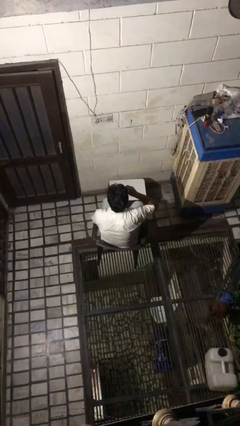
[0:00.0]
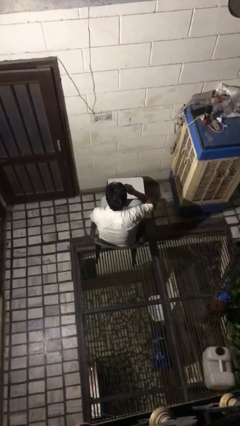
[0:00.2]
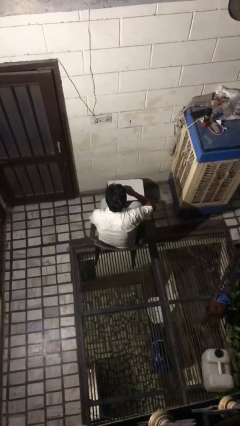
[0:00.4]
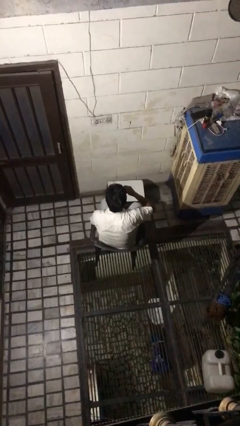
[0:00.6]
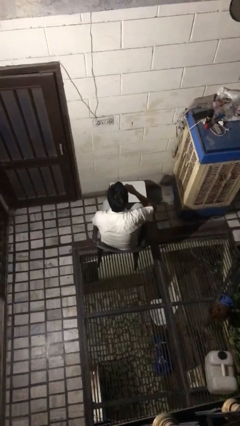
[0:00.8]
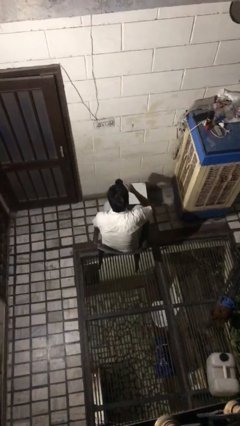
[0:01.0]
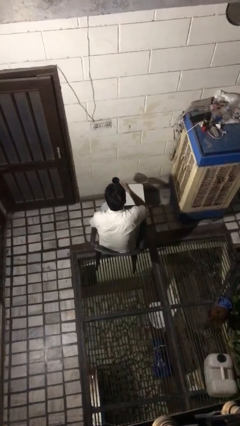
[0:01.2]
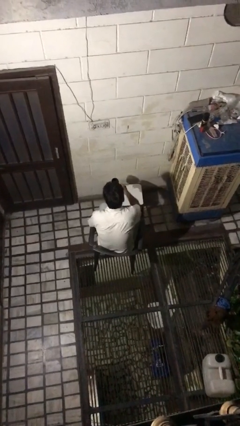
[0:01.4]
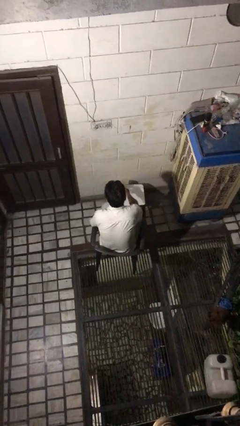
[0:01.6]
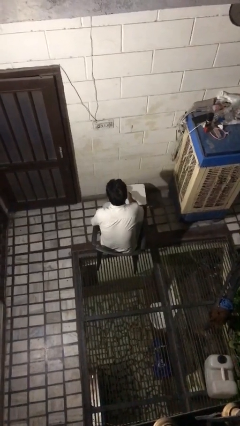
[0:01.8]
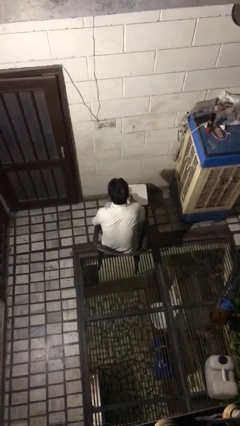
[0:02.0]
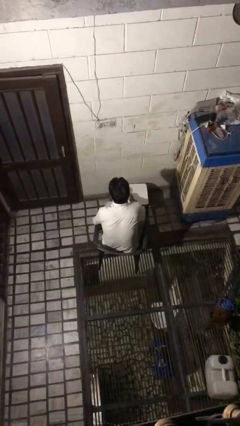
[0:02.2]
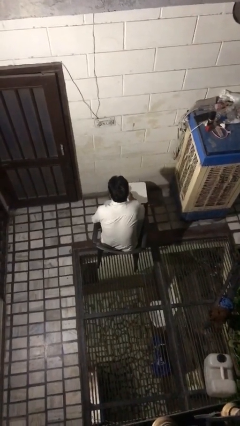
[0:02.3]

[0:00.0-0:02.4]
person puts down object on table

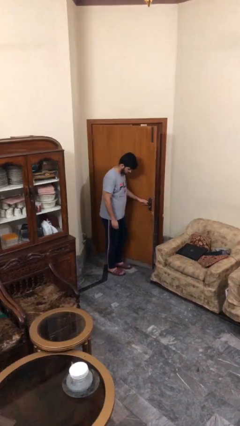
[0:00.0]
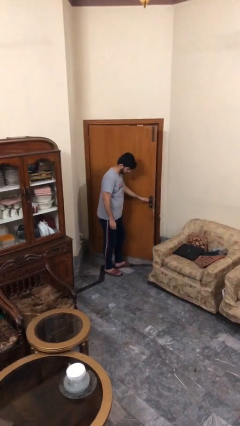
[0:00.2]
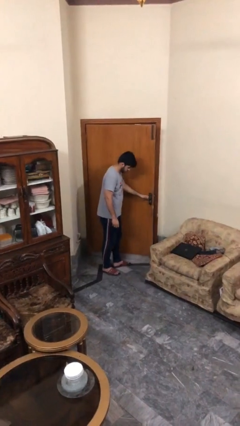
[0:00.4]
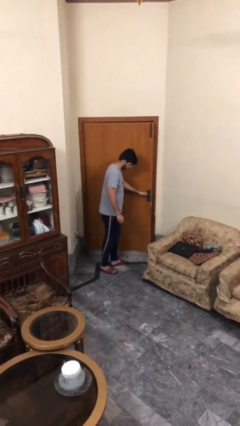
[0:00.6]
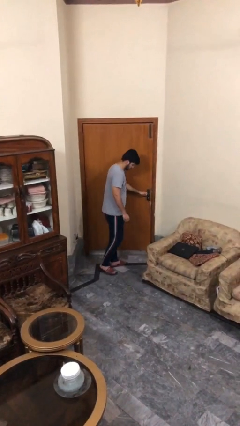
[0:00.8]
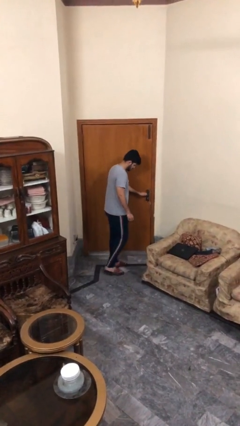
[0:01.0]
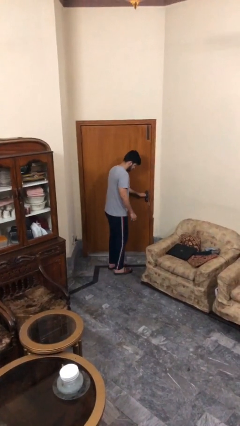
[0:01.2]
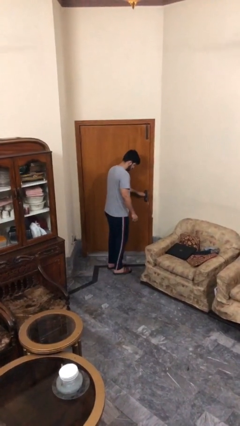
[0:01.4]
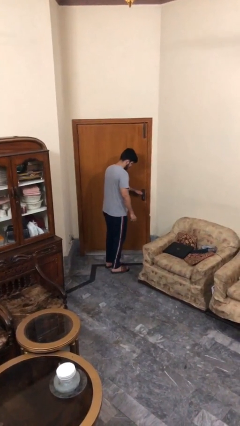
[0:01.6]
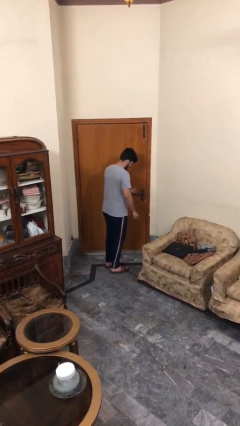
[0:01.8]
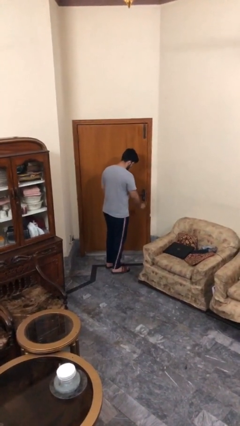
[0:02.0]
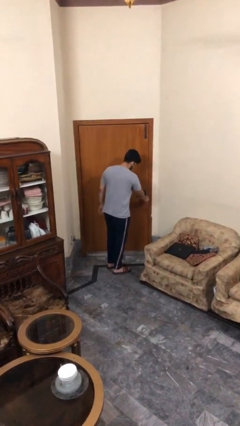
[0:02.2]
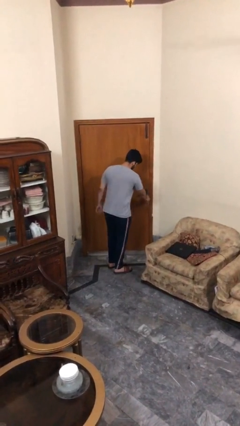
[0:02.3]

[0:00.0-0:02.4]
person closes facility door

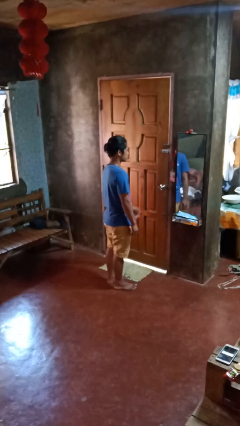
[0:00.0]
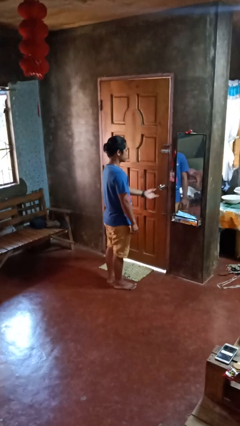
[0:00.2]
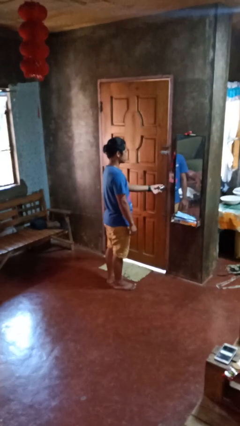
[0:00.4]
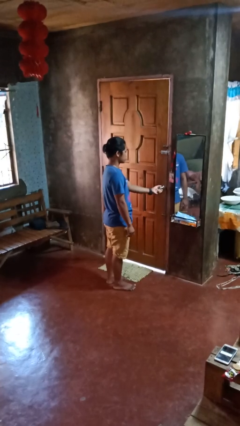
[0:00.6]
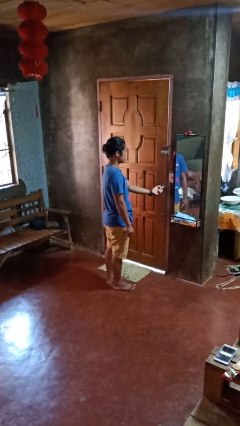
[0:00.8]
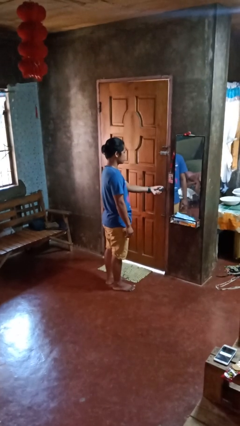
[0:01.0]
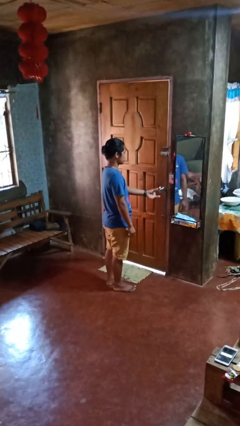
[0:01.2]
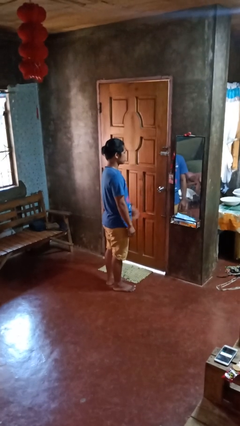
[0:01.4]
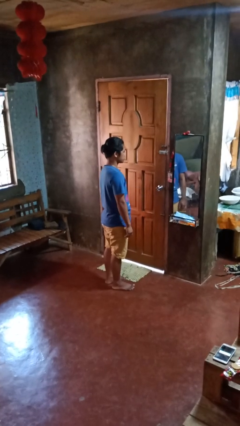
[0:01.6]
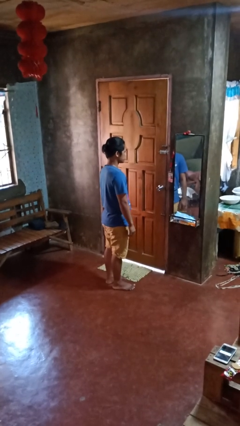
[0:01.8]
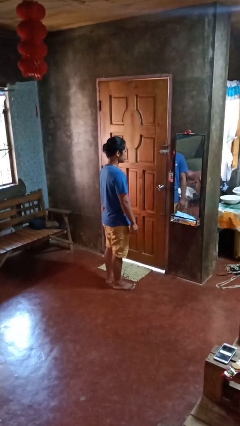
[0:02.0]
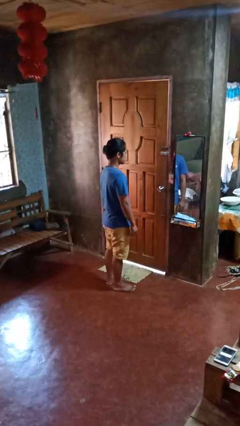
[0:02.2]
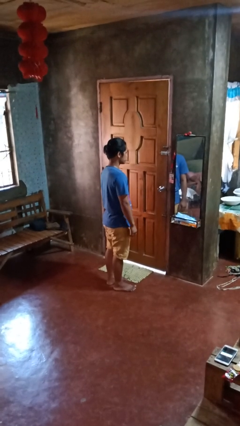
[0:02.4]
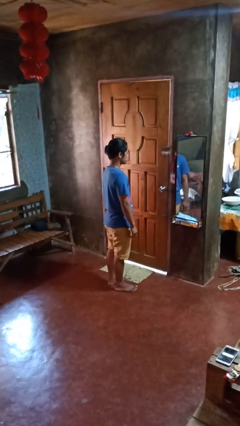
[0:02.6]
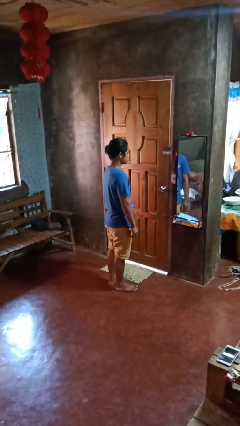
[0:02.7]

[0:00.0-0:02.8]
person unlocks door with keys

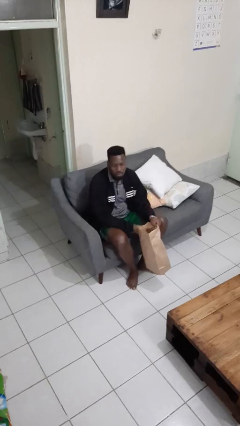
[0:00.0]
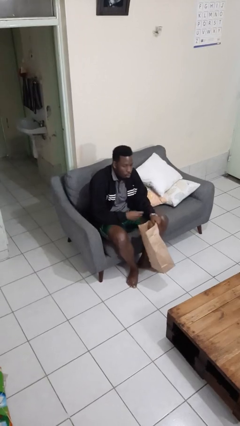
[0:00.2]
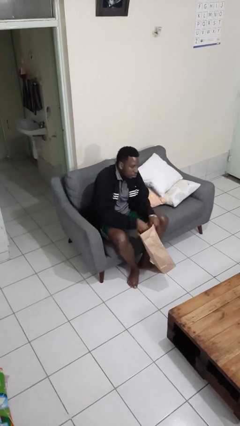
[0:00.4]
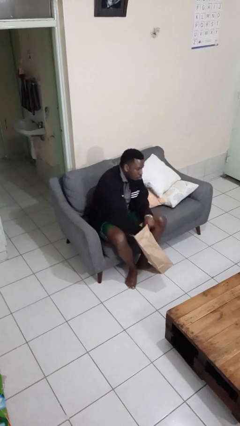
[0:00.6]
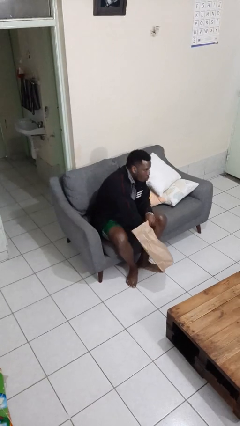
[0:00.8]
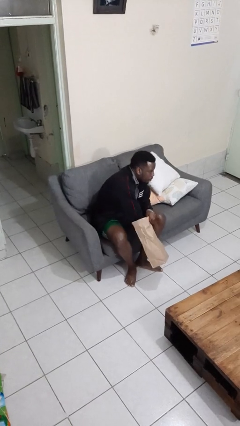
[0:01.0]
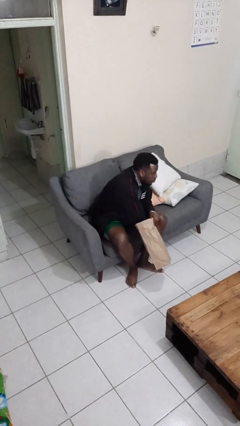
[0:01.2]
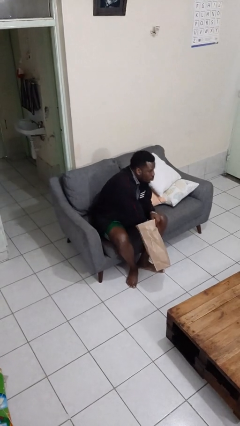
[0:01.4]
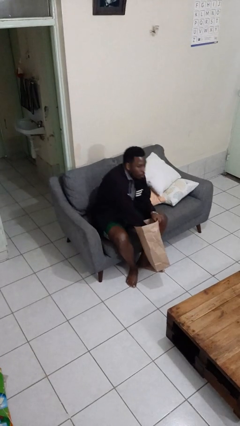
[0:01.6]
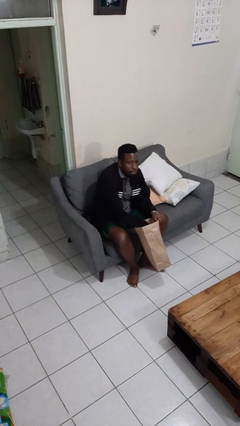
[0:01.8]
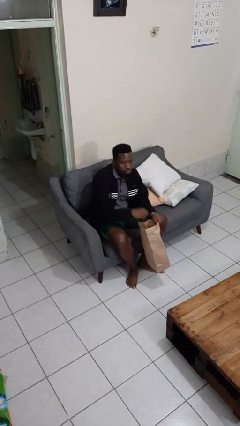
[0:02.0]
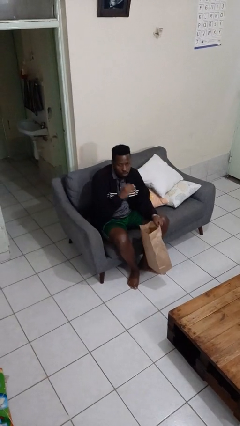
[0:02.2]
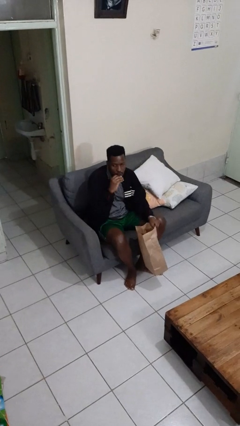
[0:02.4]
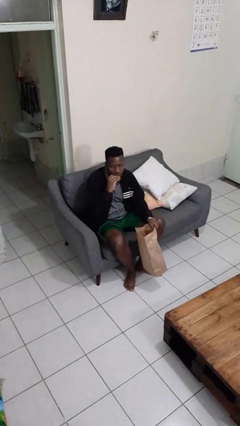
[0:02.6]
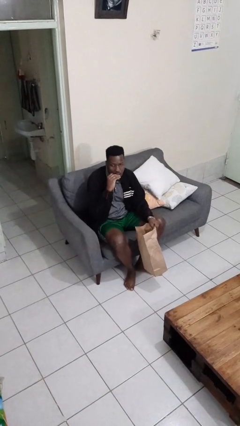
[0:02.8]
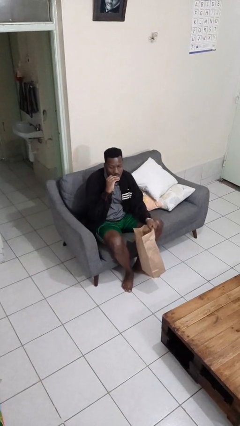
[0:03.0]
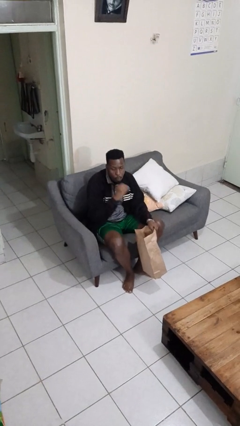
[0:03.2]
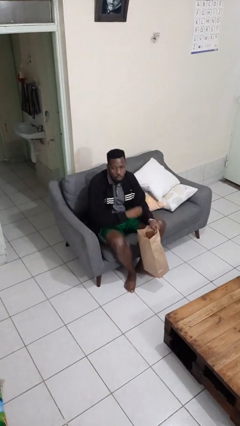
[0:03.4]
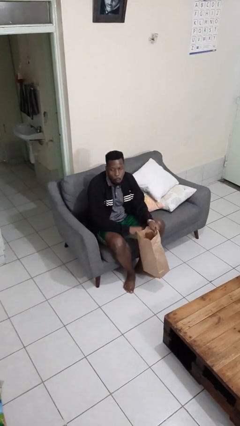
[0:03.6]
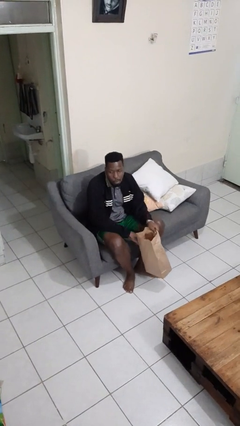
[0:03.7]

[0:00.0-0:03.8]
person eats snack from bag

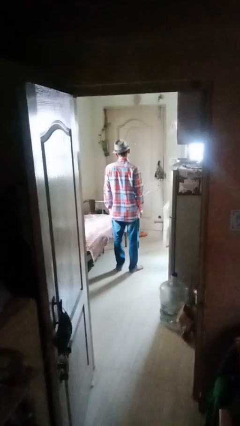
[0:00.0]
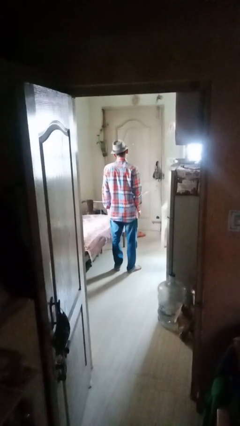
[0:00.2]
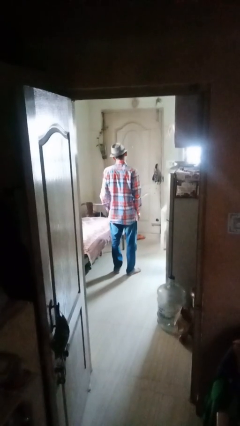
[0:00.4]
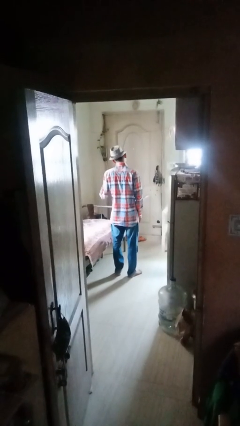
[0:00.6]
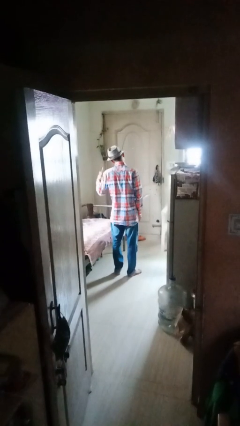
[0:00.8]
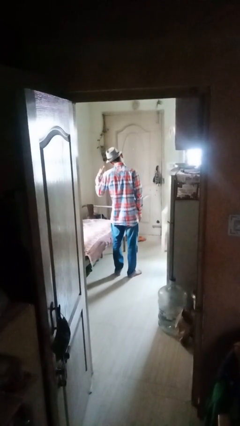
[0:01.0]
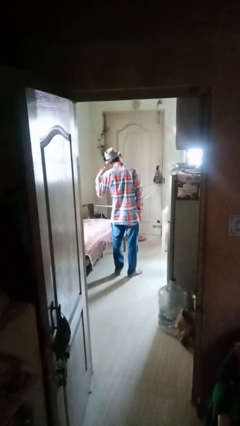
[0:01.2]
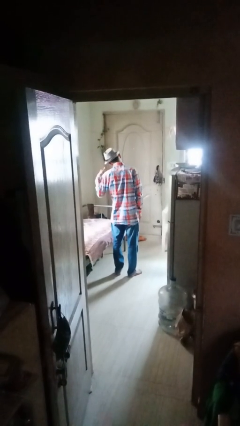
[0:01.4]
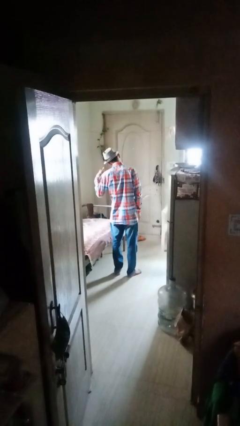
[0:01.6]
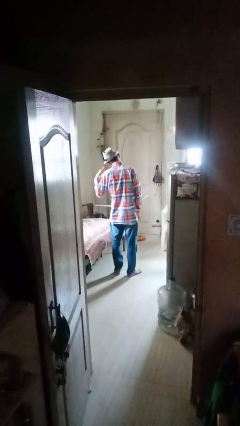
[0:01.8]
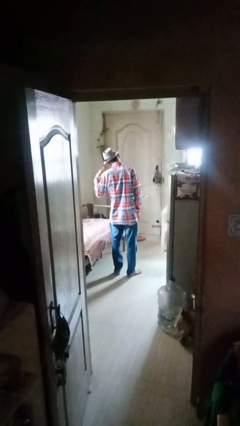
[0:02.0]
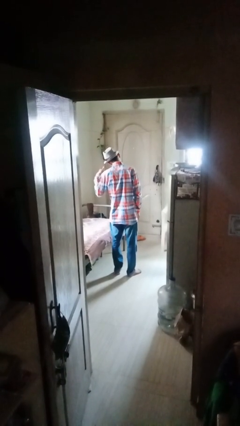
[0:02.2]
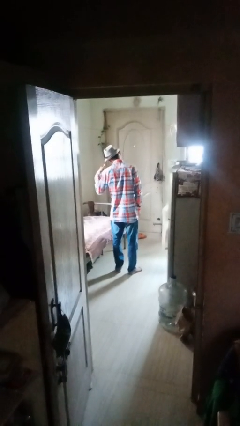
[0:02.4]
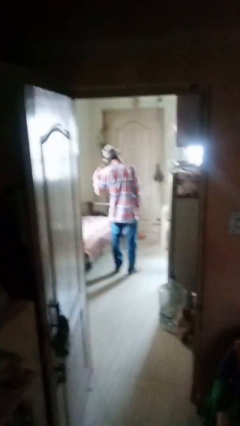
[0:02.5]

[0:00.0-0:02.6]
person gestures call me

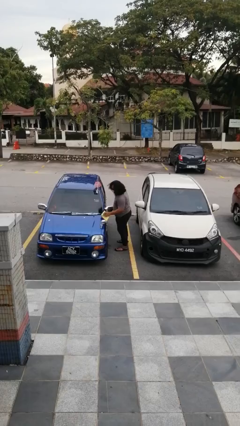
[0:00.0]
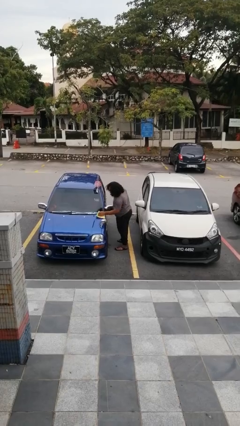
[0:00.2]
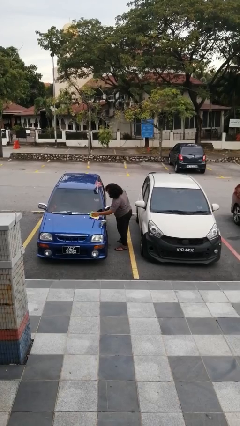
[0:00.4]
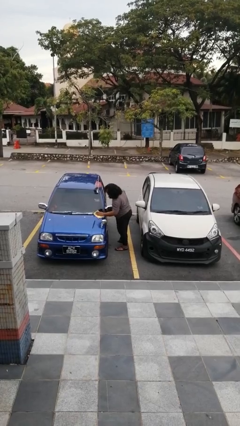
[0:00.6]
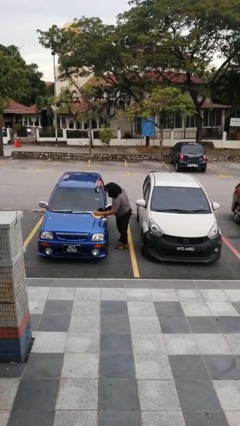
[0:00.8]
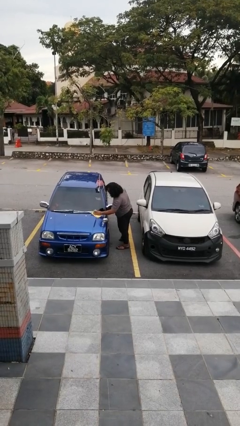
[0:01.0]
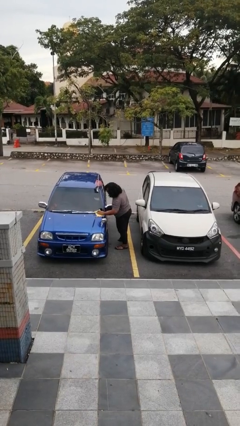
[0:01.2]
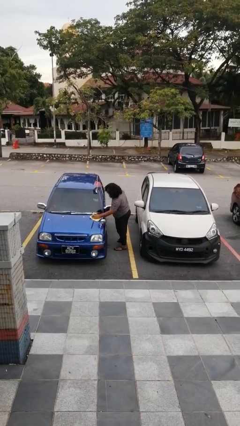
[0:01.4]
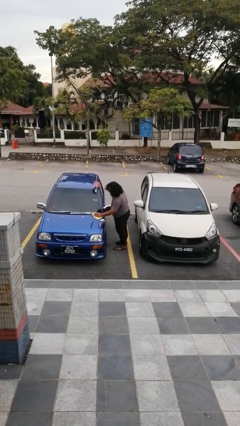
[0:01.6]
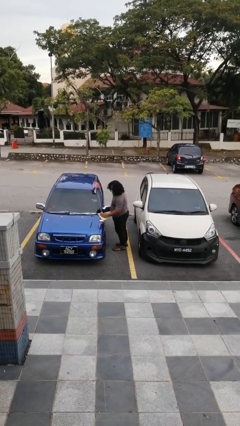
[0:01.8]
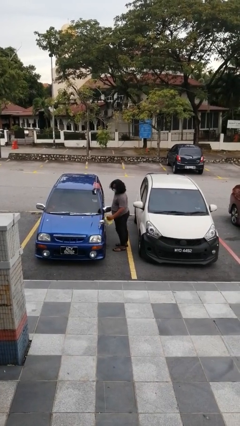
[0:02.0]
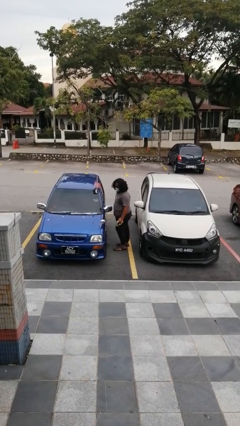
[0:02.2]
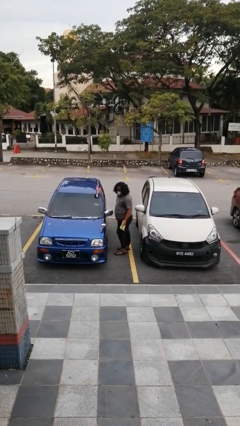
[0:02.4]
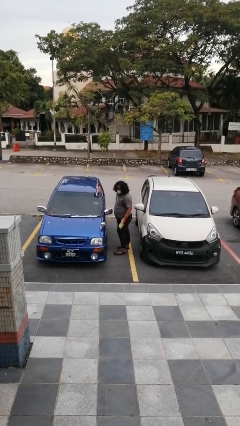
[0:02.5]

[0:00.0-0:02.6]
person polishes car with rag

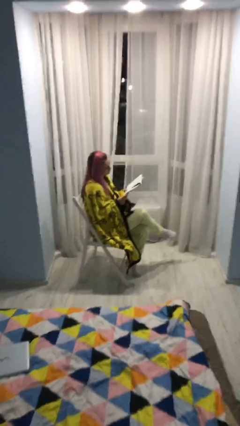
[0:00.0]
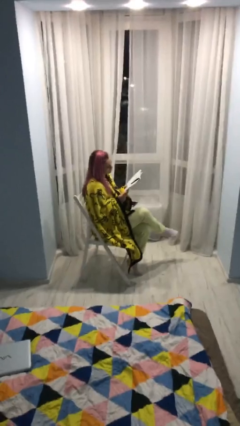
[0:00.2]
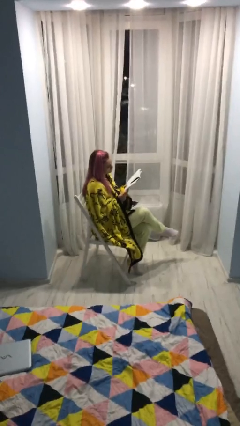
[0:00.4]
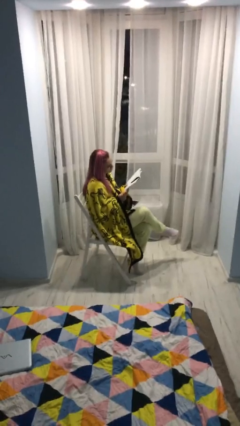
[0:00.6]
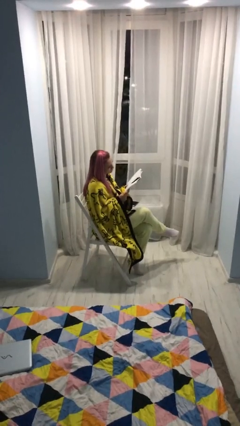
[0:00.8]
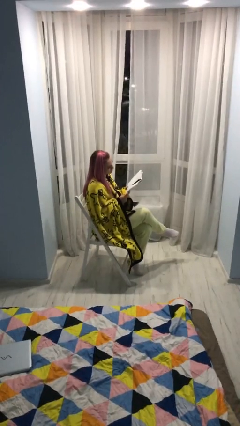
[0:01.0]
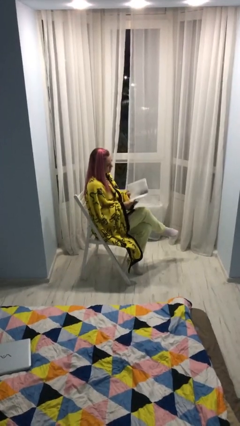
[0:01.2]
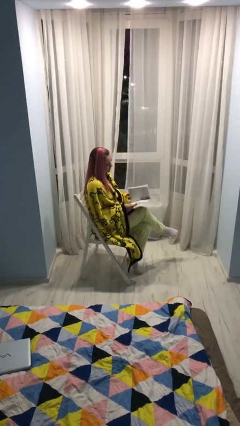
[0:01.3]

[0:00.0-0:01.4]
person reads document
